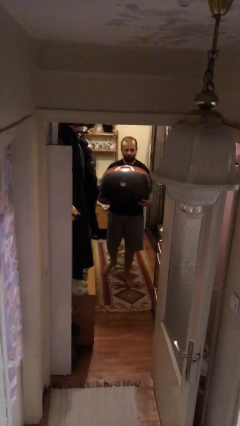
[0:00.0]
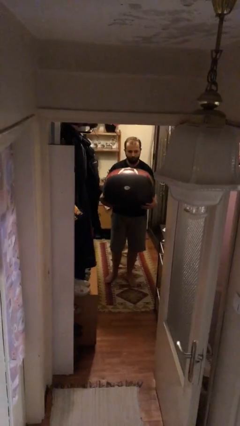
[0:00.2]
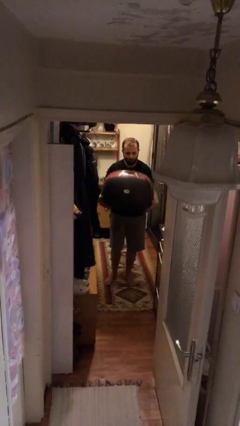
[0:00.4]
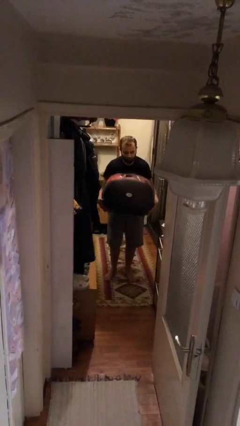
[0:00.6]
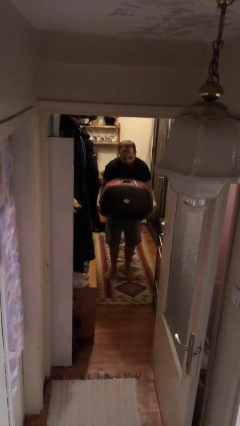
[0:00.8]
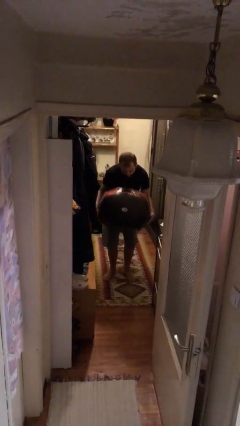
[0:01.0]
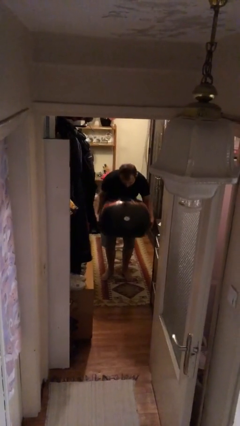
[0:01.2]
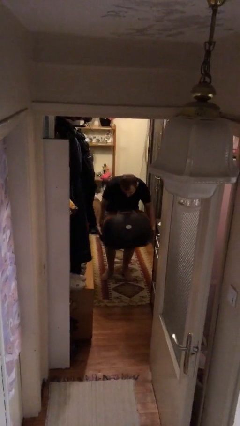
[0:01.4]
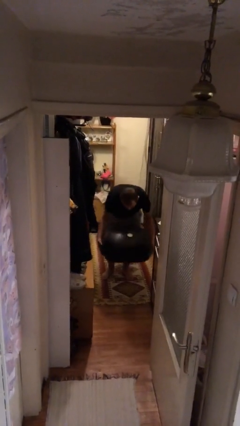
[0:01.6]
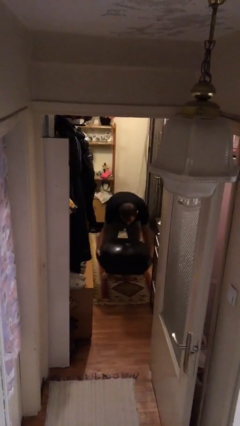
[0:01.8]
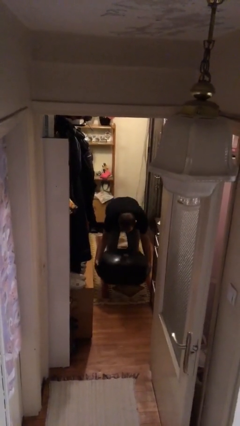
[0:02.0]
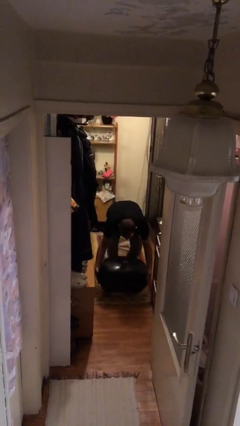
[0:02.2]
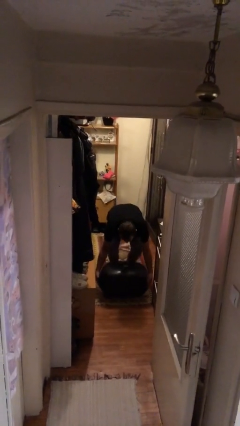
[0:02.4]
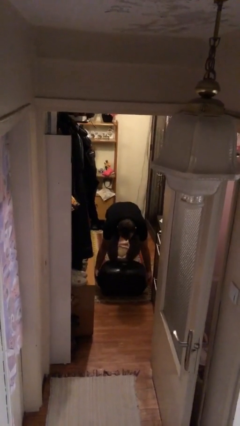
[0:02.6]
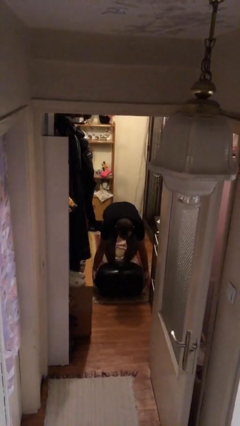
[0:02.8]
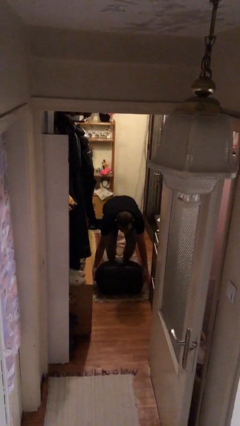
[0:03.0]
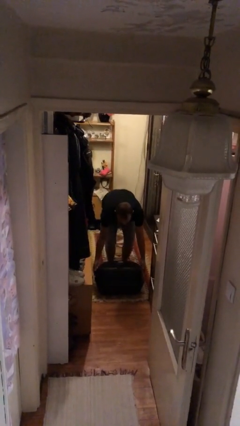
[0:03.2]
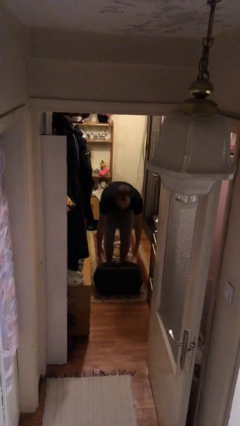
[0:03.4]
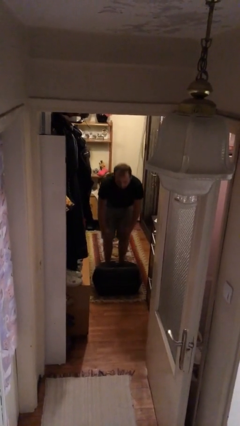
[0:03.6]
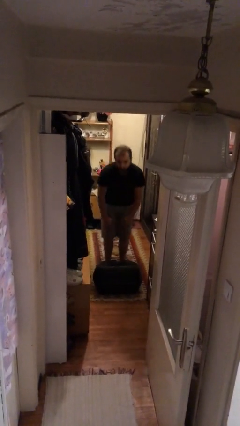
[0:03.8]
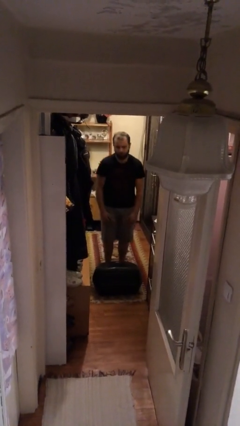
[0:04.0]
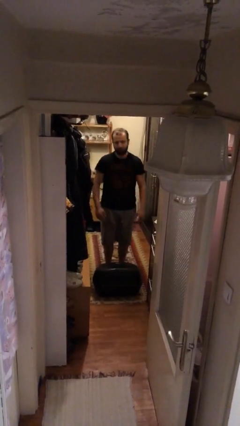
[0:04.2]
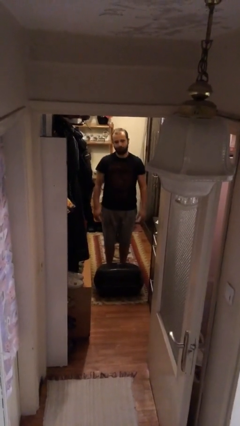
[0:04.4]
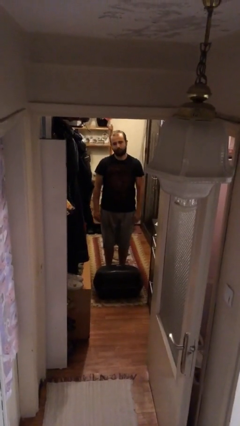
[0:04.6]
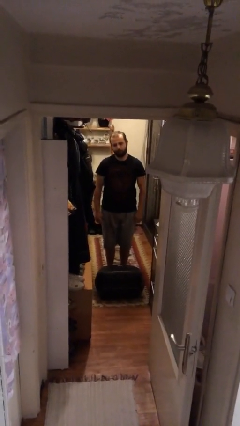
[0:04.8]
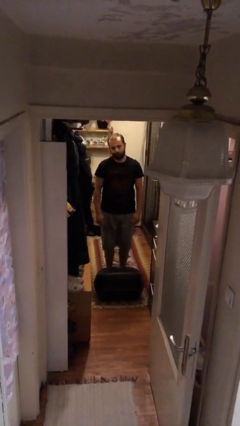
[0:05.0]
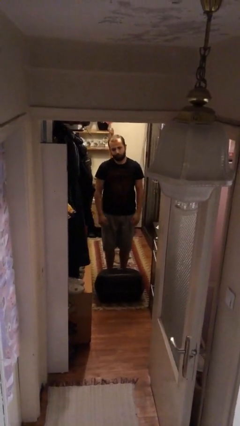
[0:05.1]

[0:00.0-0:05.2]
person puts down object on floor

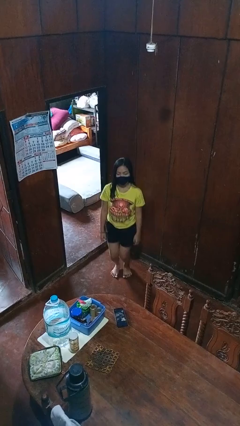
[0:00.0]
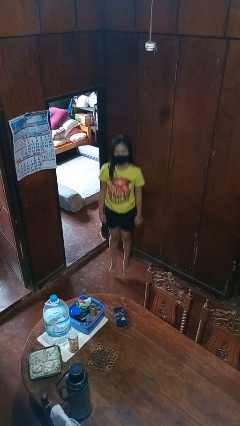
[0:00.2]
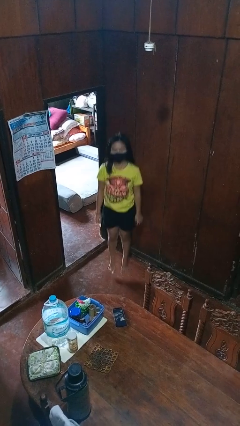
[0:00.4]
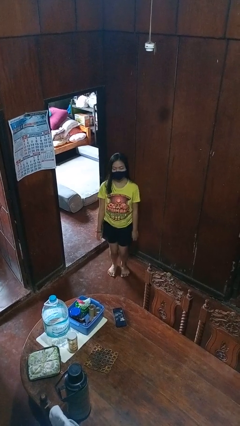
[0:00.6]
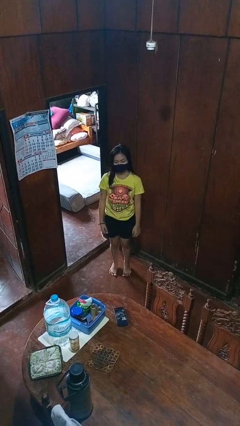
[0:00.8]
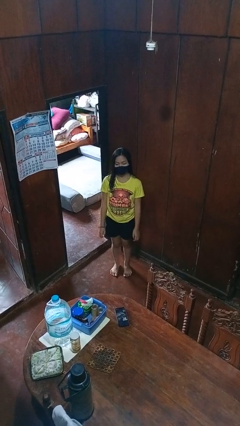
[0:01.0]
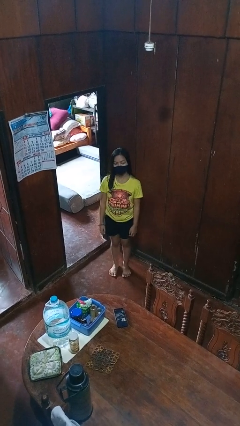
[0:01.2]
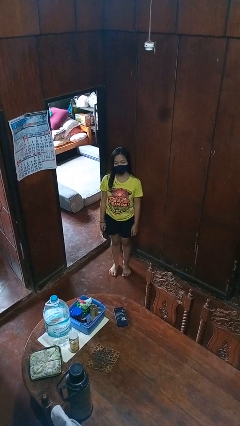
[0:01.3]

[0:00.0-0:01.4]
person jumps

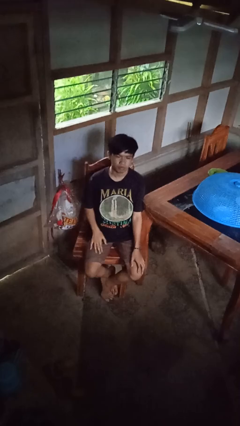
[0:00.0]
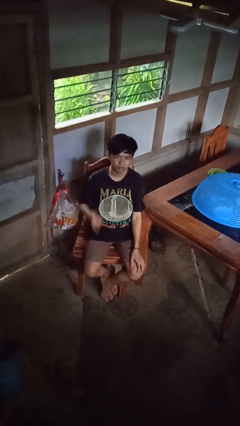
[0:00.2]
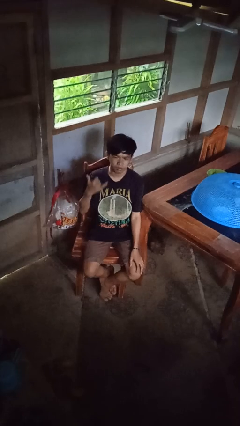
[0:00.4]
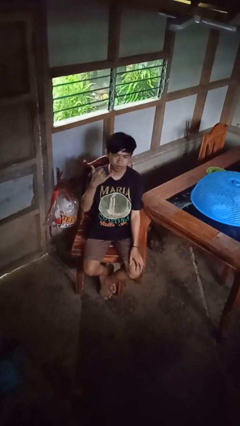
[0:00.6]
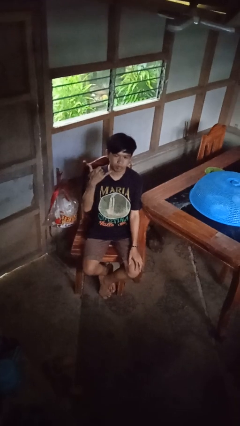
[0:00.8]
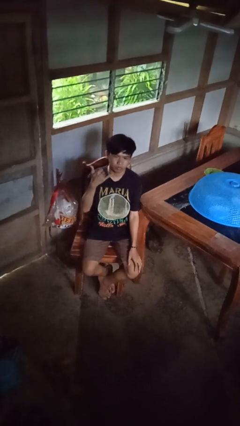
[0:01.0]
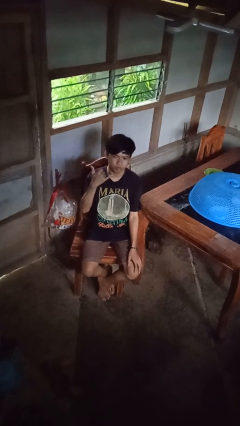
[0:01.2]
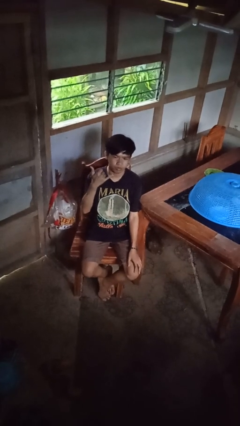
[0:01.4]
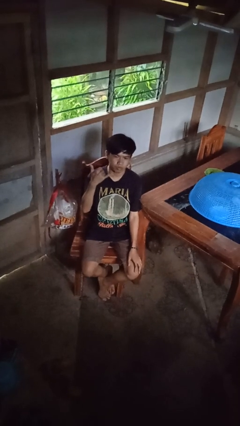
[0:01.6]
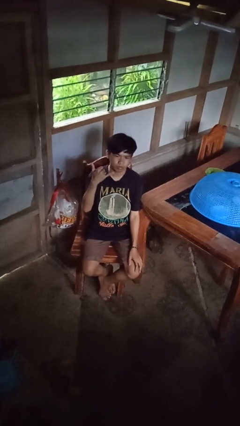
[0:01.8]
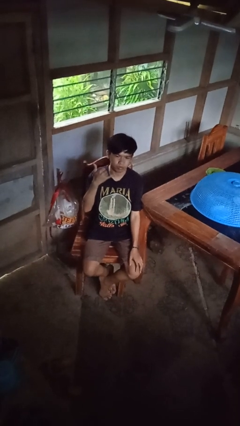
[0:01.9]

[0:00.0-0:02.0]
person gestures hang loose

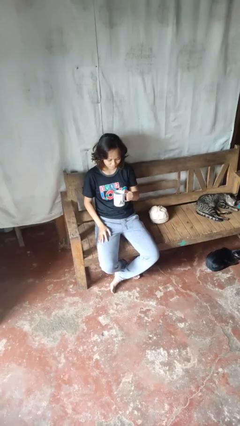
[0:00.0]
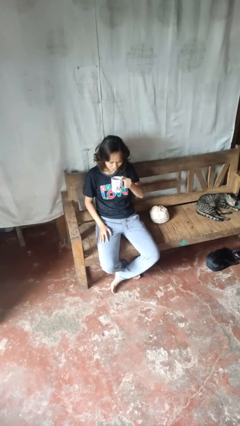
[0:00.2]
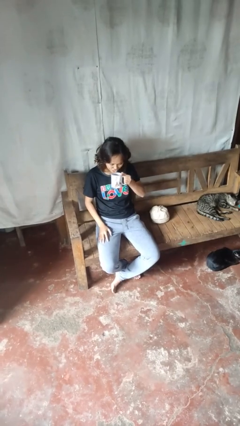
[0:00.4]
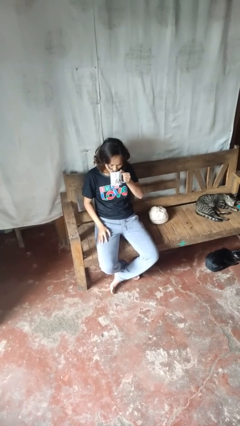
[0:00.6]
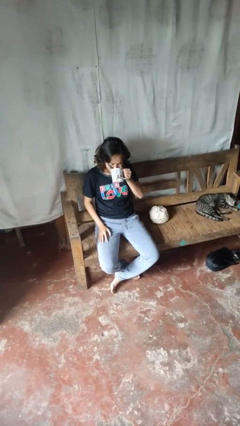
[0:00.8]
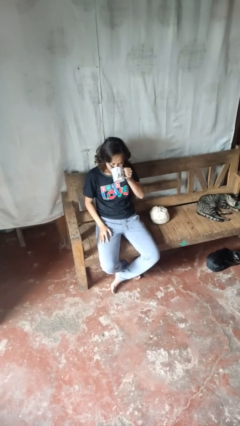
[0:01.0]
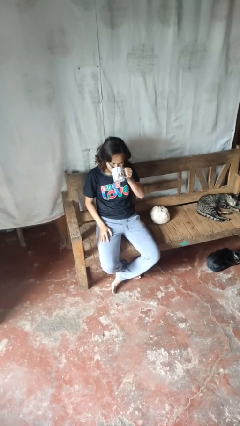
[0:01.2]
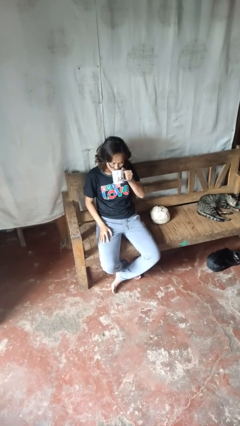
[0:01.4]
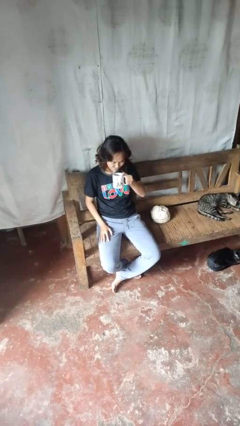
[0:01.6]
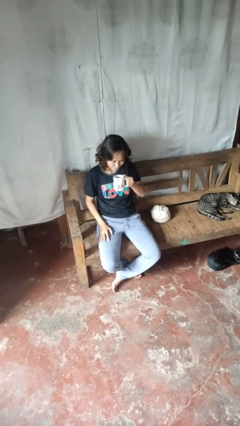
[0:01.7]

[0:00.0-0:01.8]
person drinks from mug

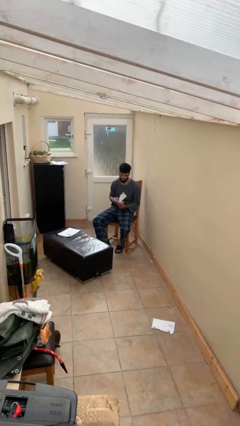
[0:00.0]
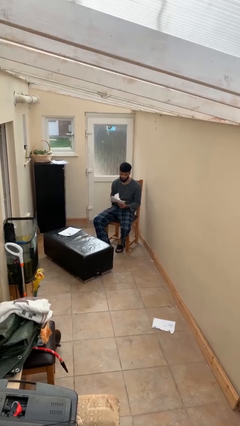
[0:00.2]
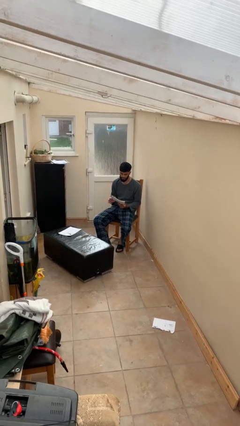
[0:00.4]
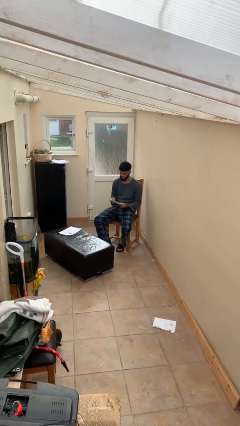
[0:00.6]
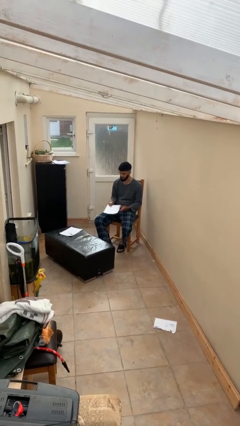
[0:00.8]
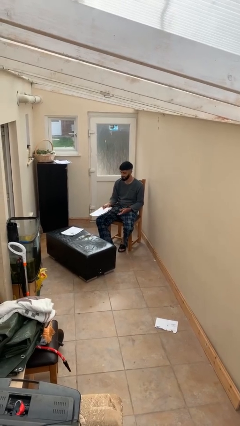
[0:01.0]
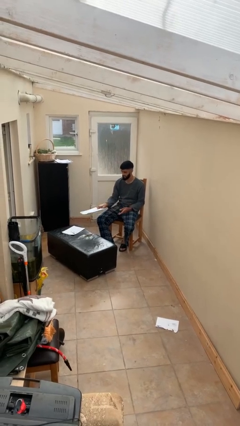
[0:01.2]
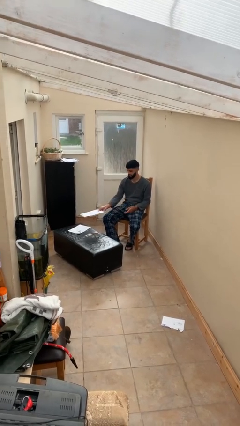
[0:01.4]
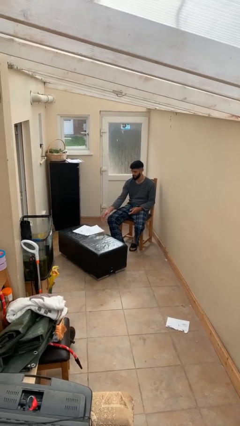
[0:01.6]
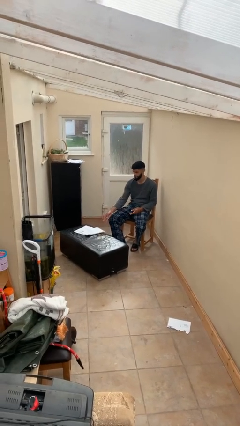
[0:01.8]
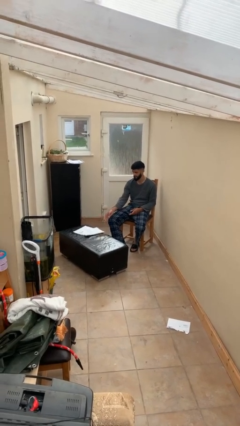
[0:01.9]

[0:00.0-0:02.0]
person puts down object on table

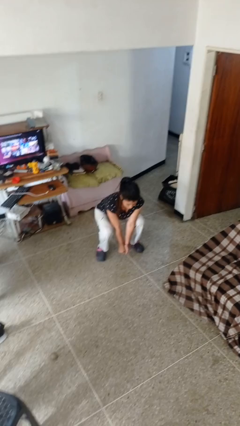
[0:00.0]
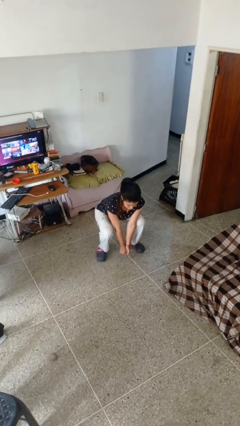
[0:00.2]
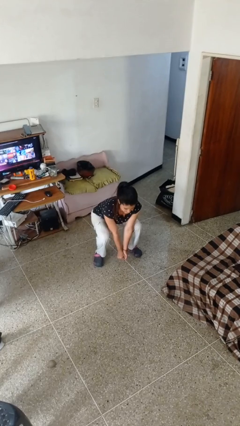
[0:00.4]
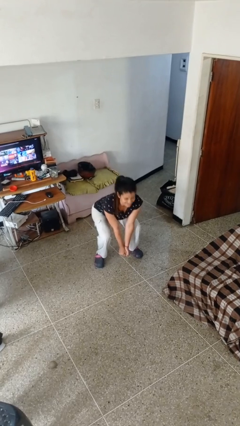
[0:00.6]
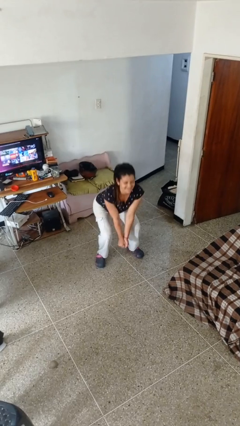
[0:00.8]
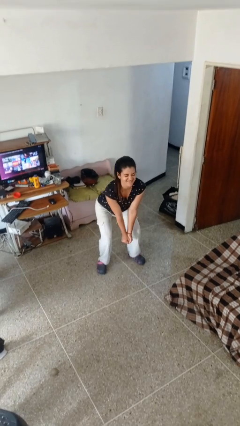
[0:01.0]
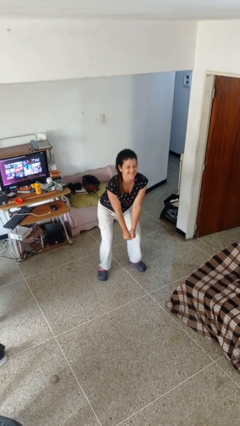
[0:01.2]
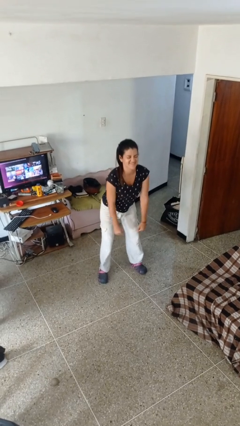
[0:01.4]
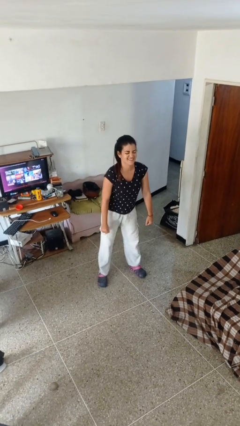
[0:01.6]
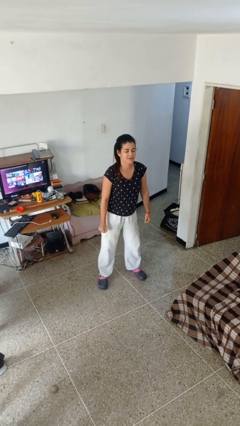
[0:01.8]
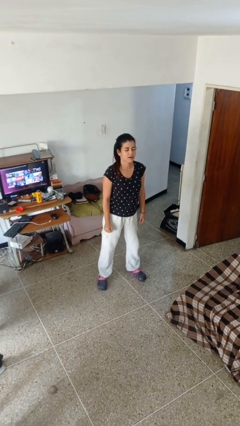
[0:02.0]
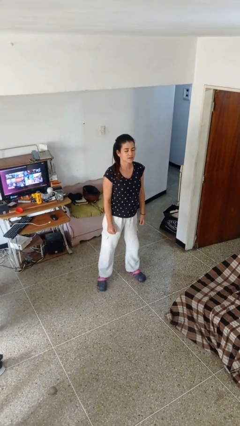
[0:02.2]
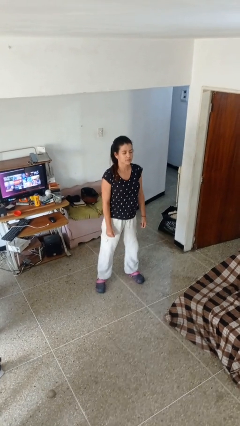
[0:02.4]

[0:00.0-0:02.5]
person stands up

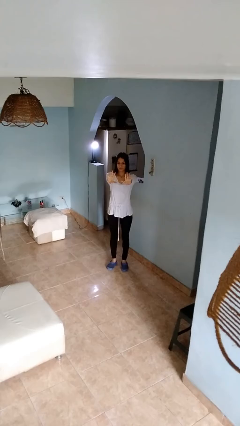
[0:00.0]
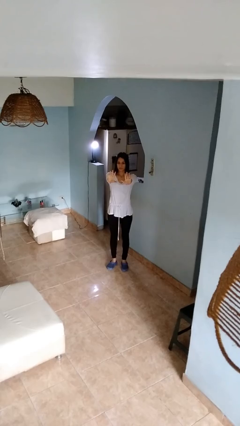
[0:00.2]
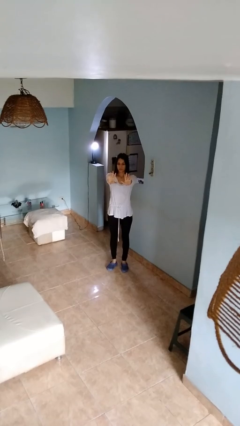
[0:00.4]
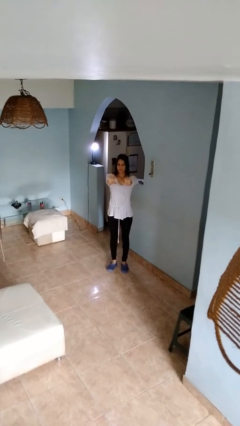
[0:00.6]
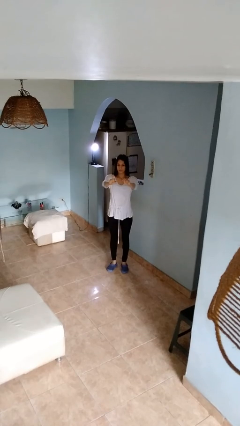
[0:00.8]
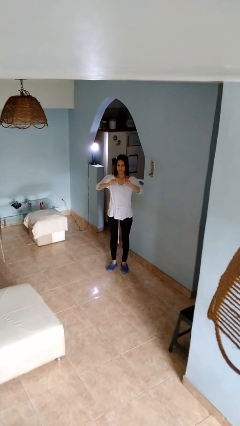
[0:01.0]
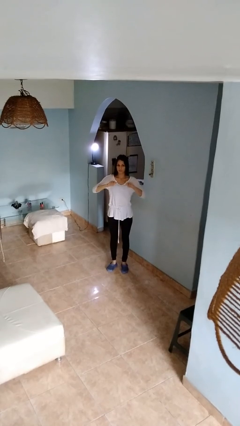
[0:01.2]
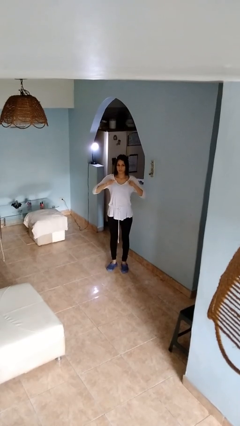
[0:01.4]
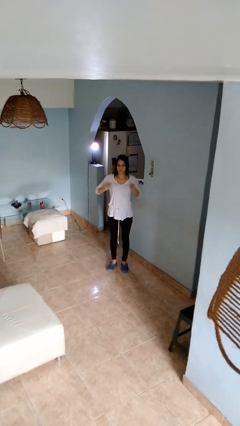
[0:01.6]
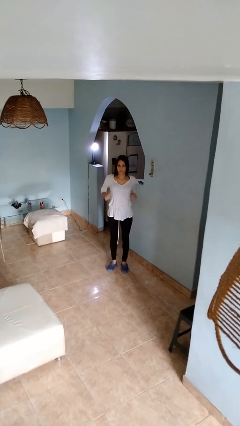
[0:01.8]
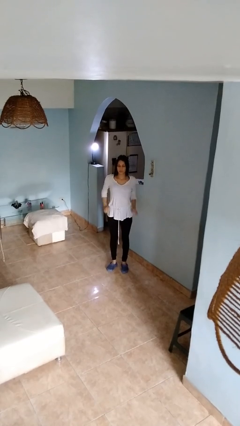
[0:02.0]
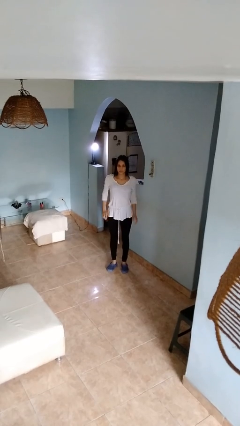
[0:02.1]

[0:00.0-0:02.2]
person gestures zoom out
